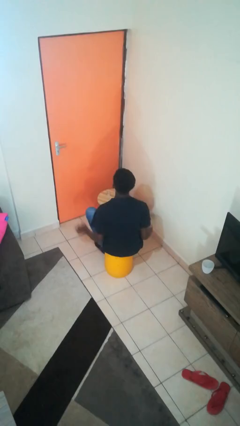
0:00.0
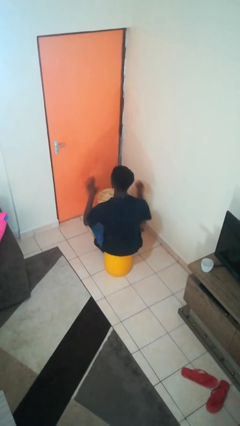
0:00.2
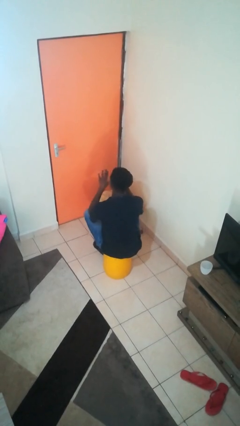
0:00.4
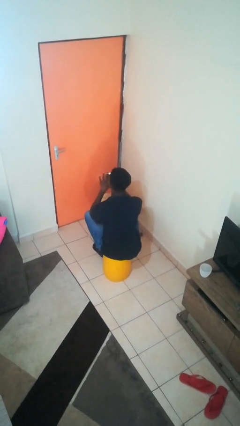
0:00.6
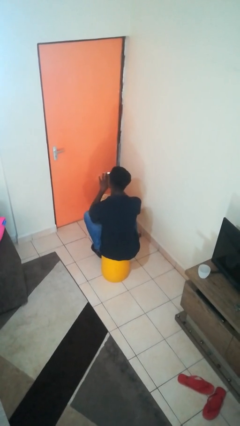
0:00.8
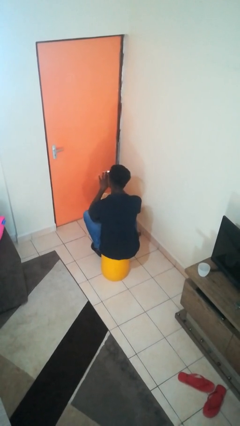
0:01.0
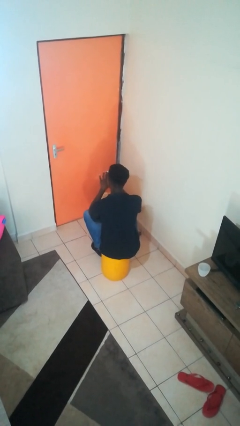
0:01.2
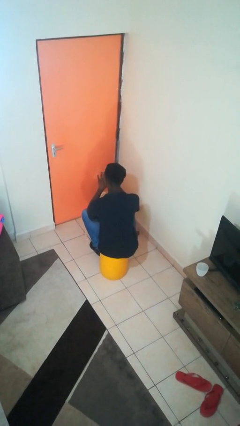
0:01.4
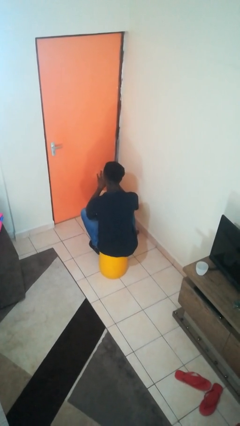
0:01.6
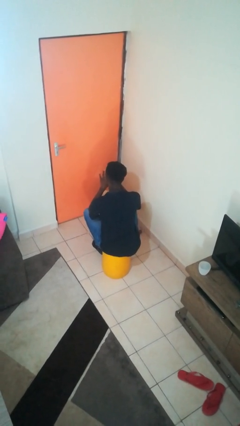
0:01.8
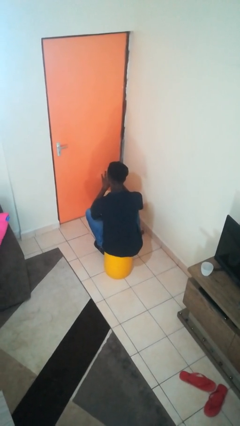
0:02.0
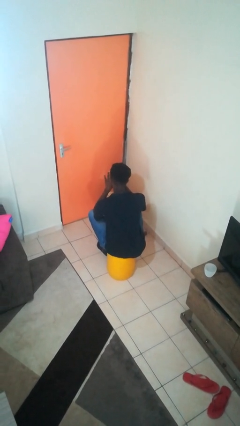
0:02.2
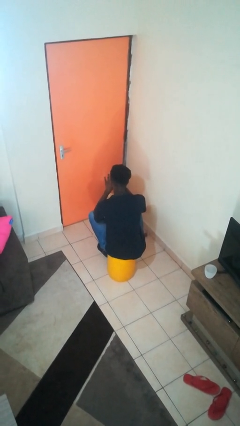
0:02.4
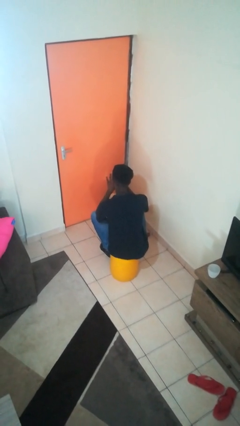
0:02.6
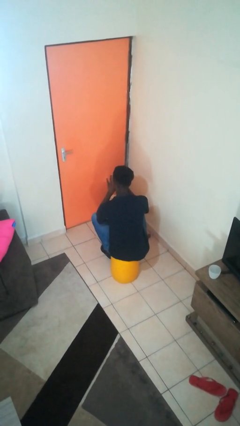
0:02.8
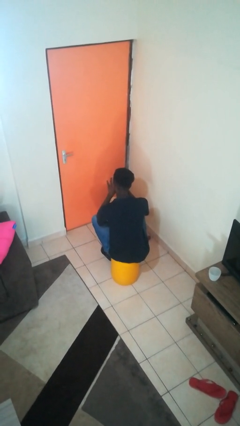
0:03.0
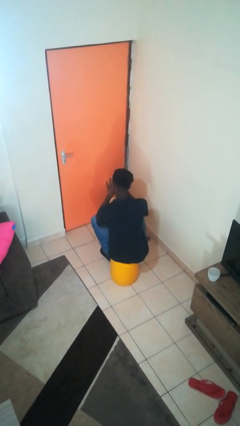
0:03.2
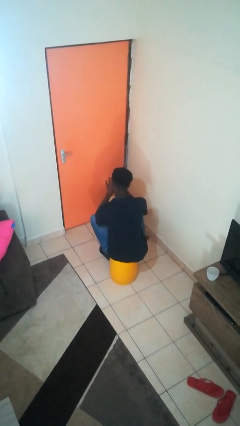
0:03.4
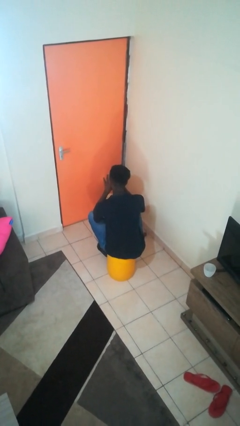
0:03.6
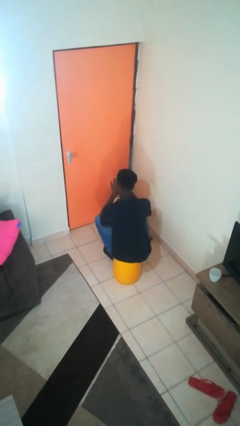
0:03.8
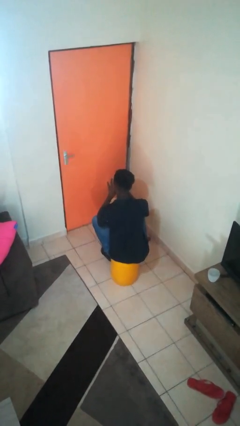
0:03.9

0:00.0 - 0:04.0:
person paints fingernails

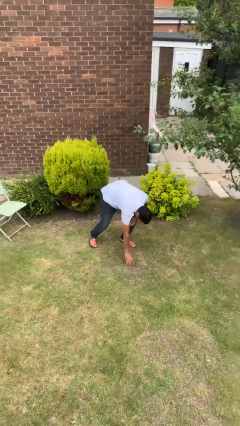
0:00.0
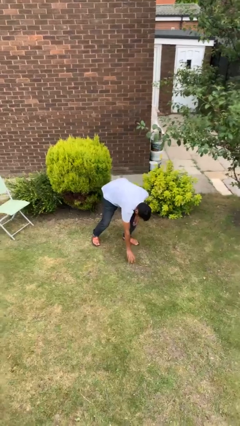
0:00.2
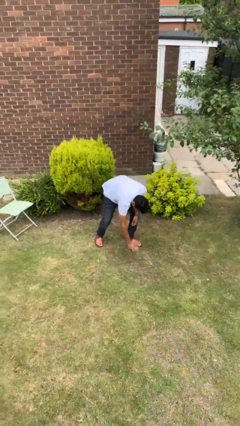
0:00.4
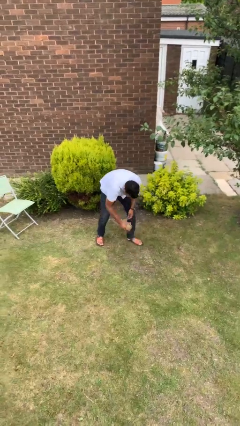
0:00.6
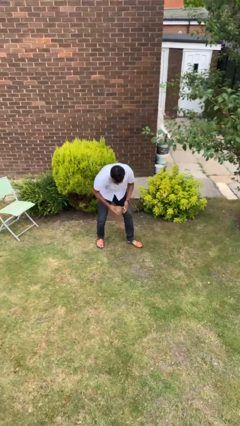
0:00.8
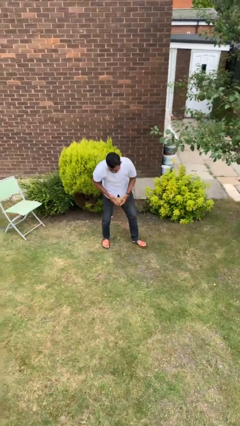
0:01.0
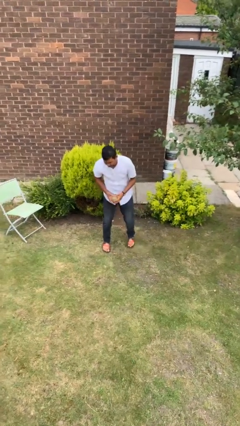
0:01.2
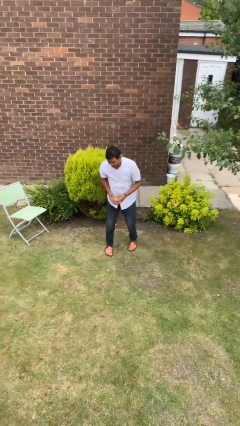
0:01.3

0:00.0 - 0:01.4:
person picks up object from floor

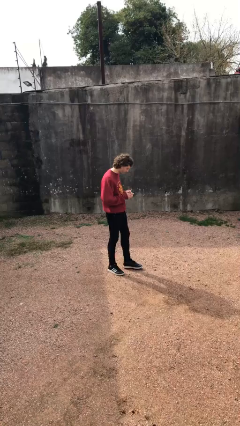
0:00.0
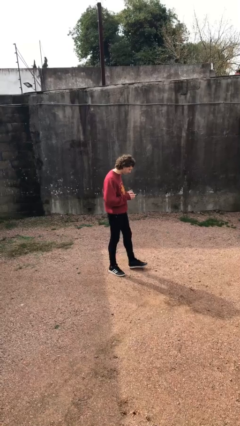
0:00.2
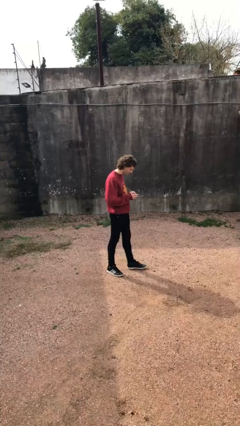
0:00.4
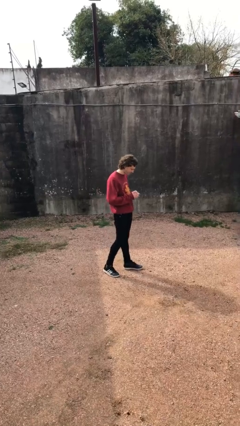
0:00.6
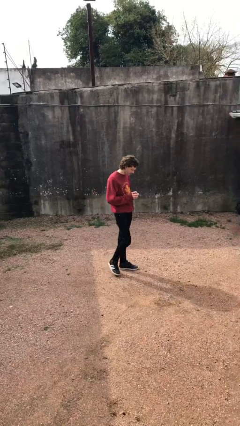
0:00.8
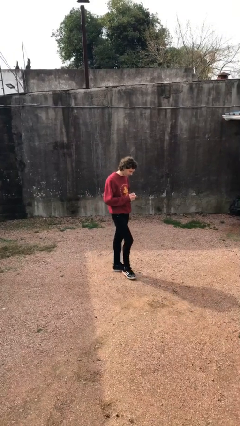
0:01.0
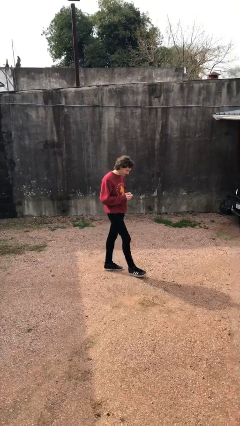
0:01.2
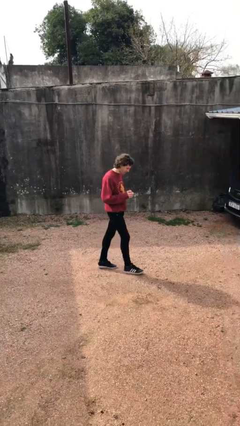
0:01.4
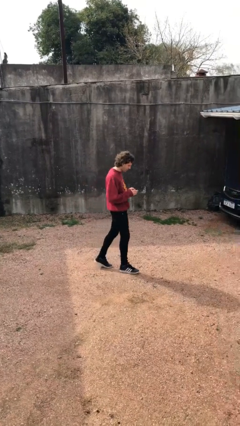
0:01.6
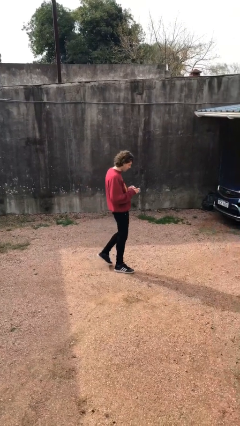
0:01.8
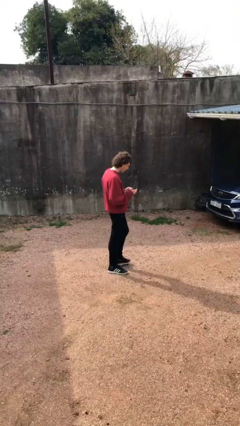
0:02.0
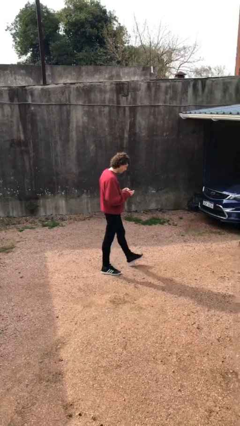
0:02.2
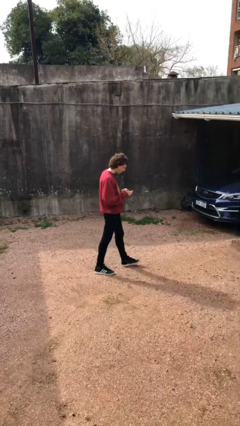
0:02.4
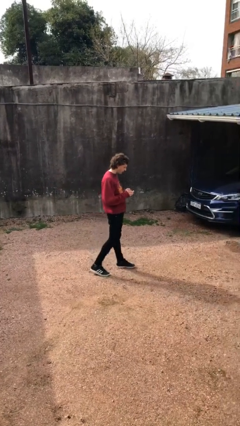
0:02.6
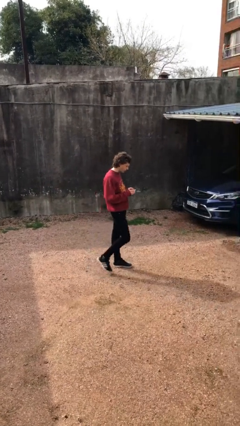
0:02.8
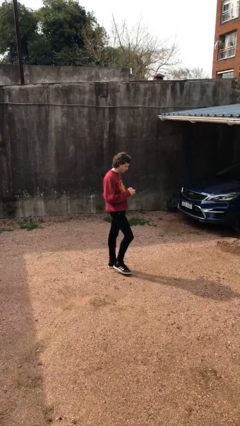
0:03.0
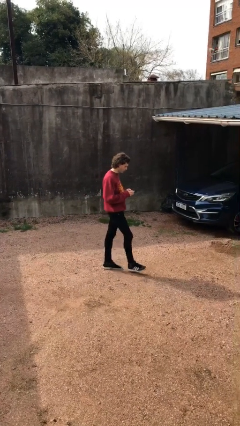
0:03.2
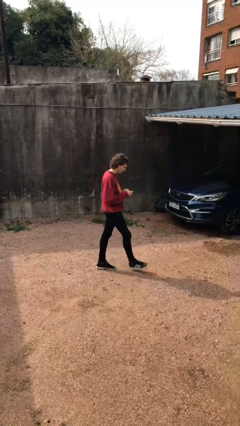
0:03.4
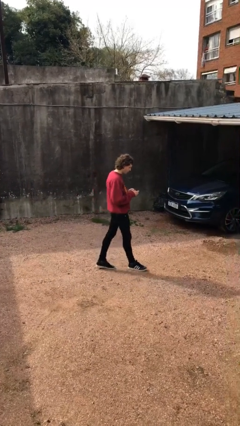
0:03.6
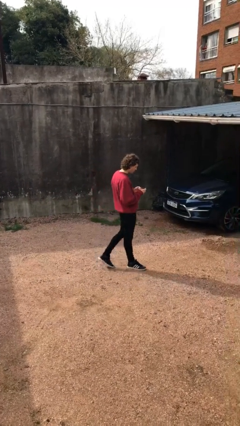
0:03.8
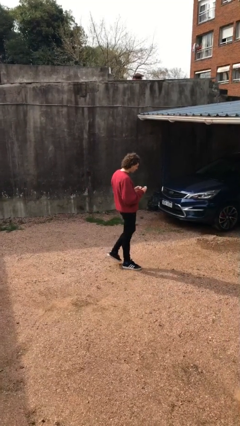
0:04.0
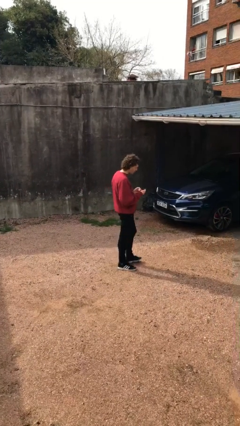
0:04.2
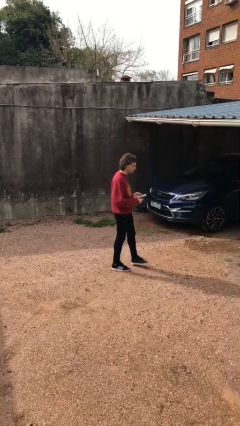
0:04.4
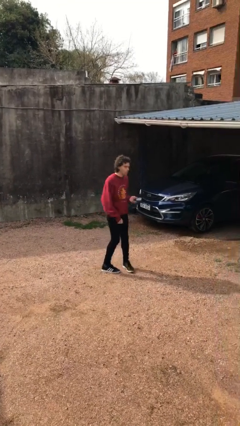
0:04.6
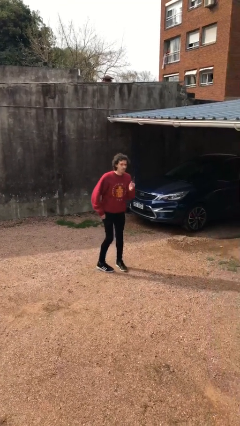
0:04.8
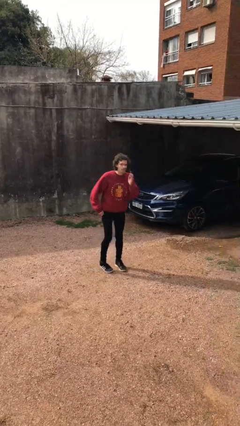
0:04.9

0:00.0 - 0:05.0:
person texts on phone

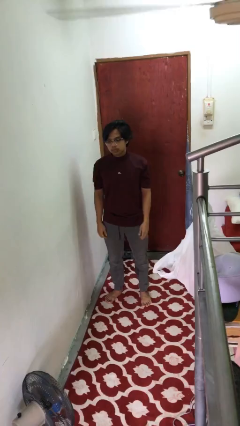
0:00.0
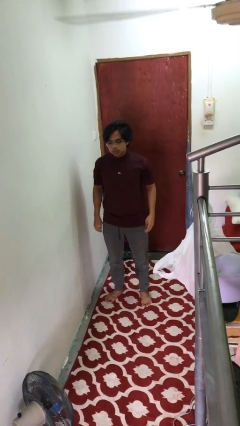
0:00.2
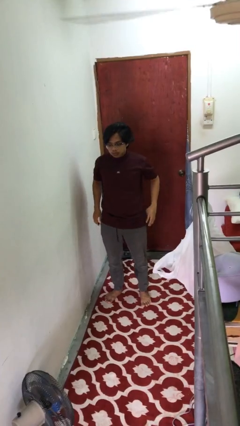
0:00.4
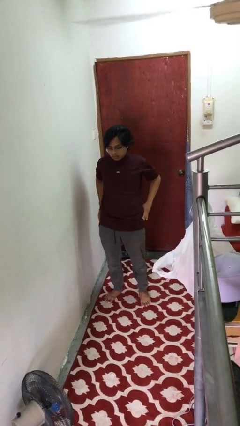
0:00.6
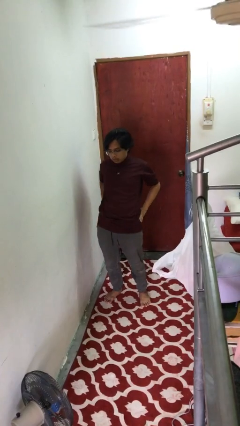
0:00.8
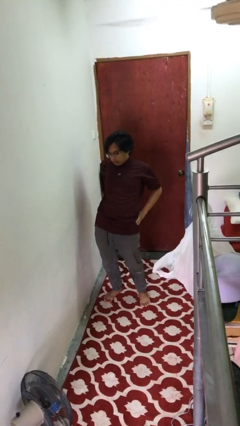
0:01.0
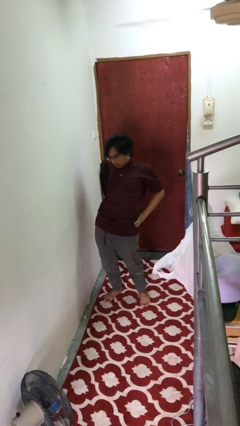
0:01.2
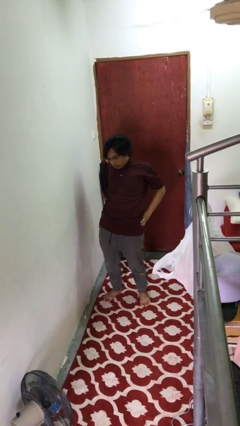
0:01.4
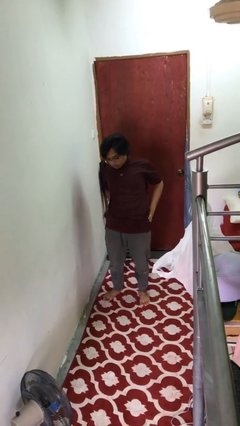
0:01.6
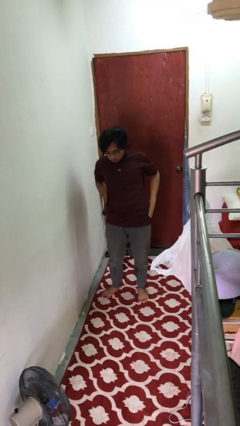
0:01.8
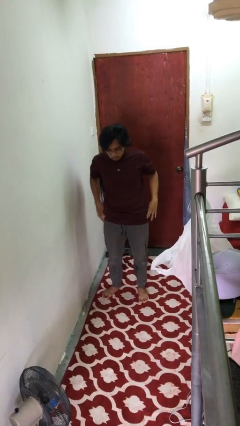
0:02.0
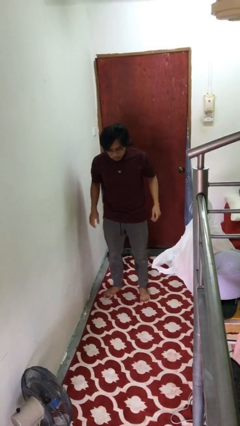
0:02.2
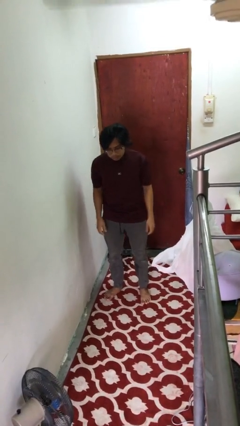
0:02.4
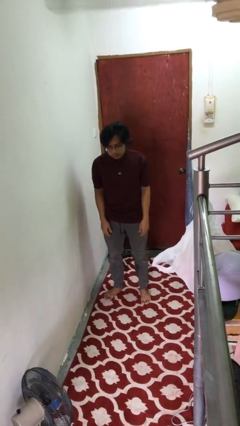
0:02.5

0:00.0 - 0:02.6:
person stretches back

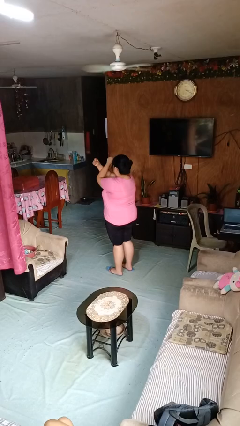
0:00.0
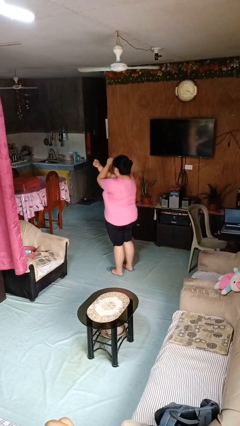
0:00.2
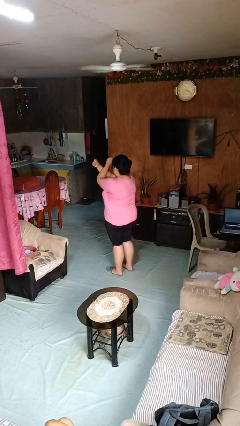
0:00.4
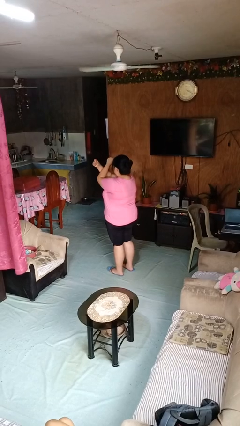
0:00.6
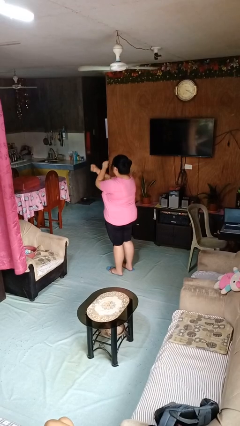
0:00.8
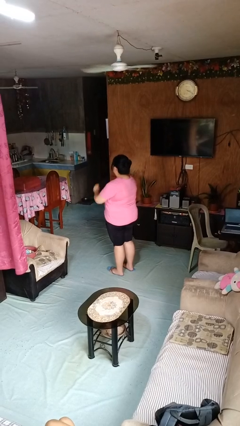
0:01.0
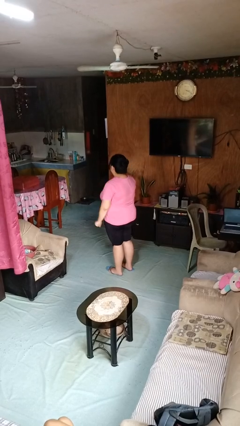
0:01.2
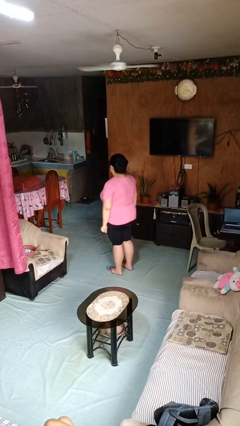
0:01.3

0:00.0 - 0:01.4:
person gestures arms x

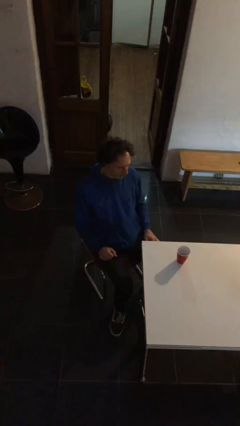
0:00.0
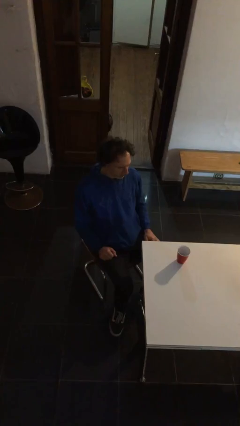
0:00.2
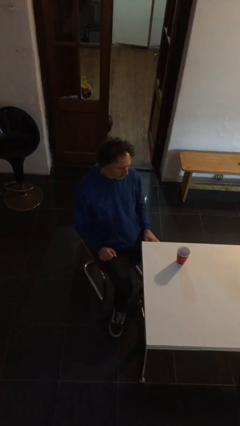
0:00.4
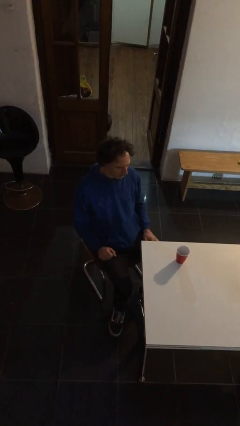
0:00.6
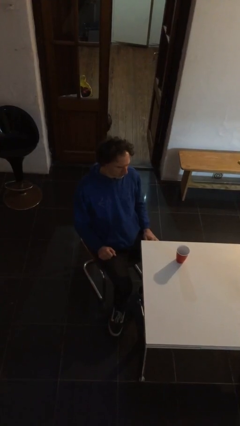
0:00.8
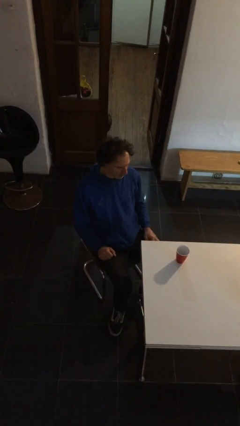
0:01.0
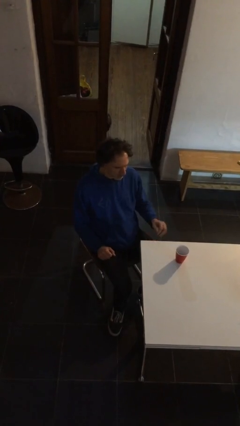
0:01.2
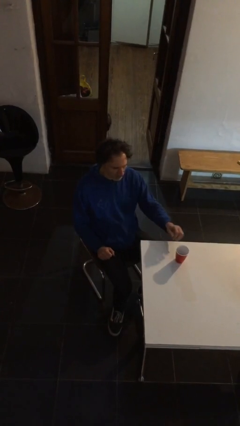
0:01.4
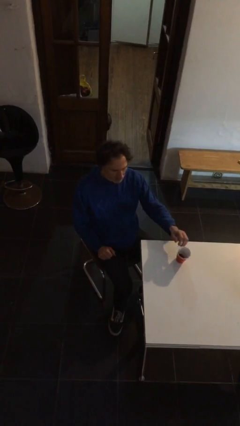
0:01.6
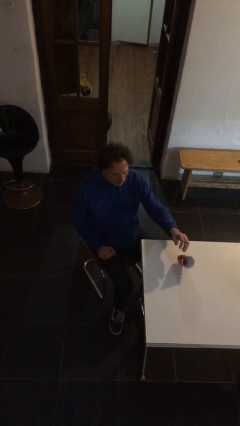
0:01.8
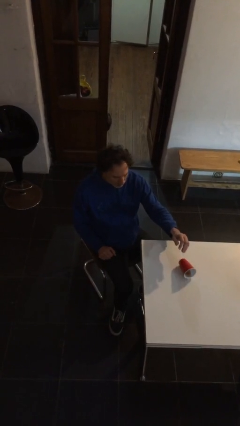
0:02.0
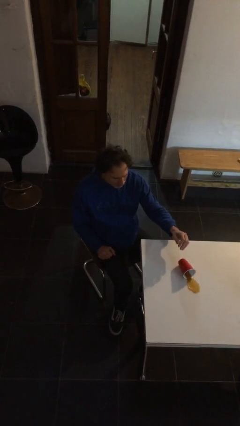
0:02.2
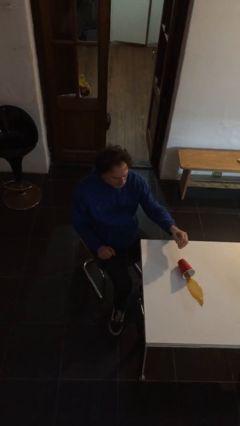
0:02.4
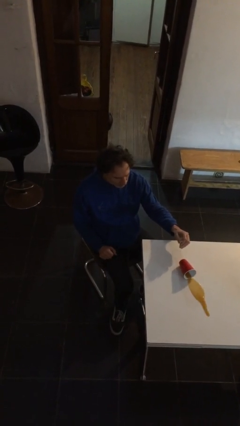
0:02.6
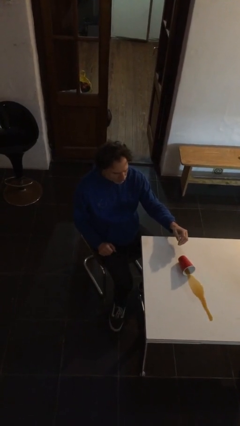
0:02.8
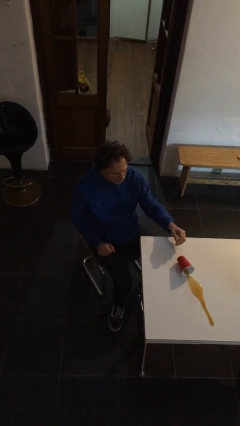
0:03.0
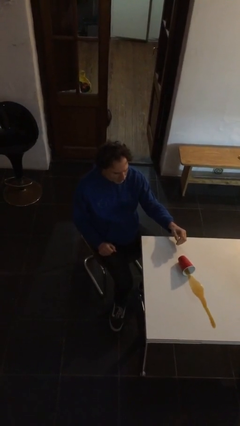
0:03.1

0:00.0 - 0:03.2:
person spills on table

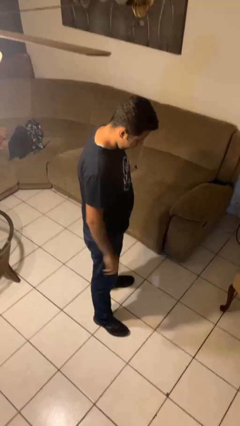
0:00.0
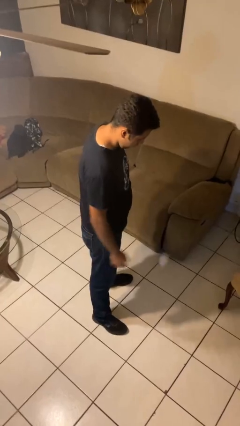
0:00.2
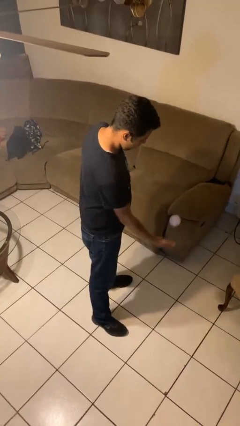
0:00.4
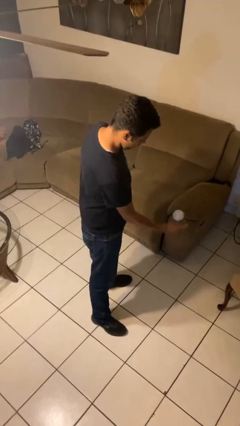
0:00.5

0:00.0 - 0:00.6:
person bounces ball on floor
